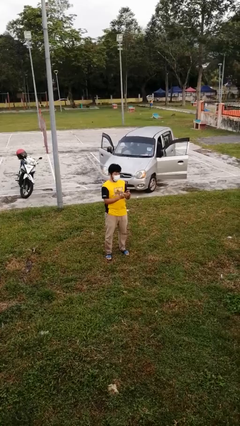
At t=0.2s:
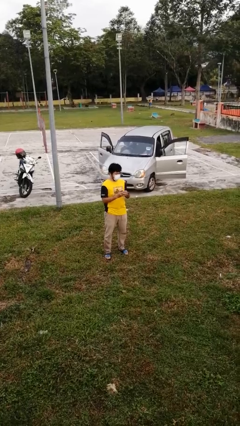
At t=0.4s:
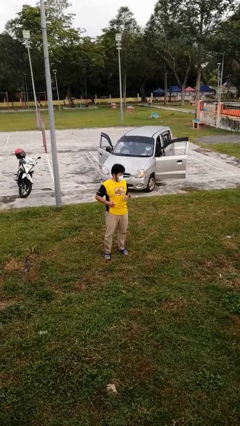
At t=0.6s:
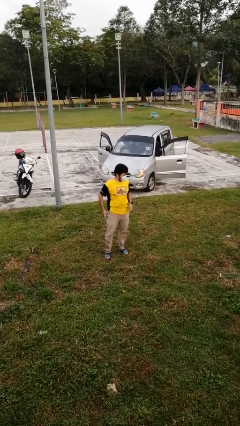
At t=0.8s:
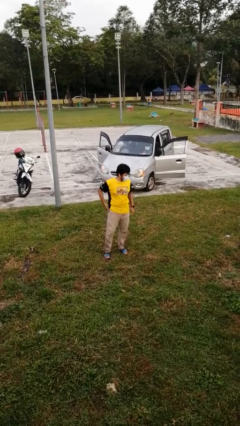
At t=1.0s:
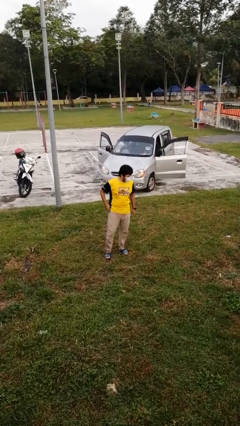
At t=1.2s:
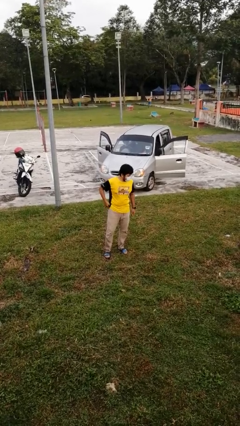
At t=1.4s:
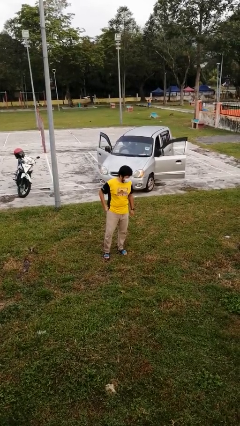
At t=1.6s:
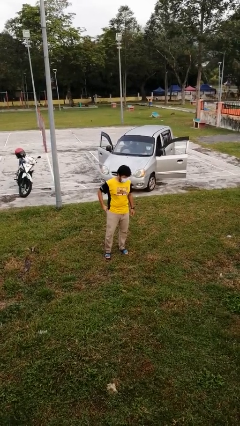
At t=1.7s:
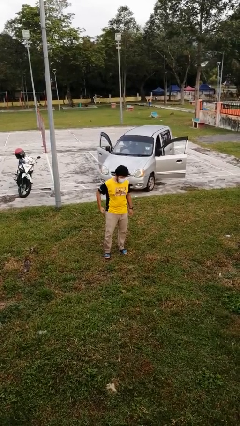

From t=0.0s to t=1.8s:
person puts phone into pocket

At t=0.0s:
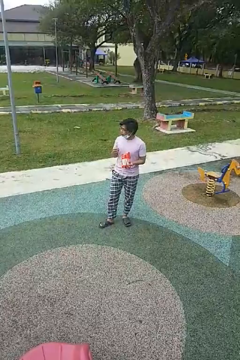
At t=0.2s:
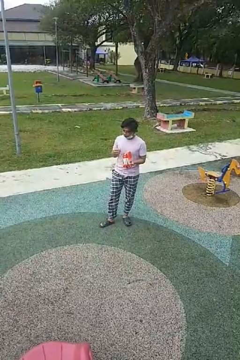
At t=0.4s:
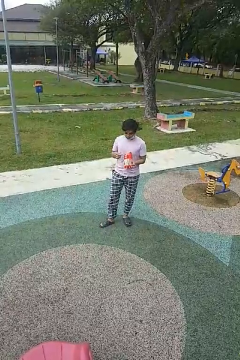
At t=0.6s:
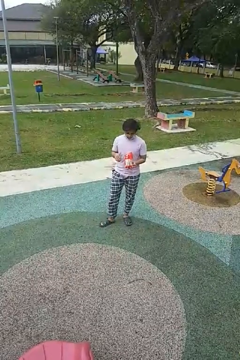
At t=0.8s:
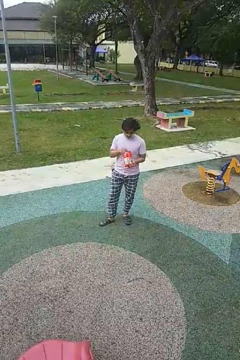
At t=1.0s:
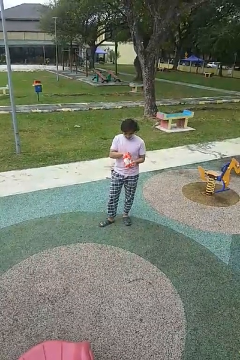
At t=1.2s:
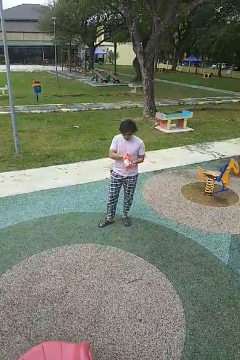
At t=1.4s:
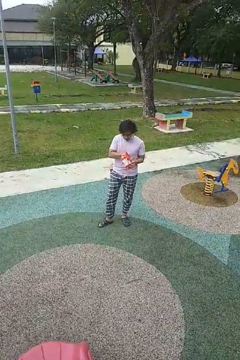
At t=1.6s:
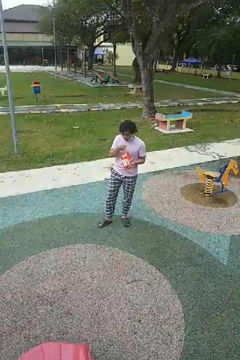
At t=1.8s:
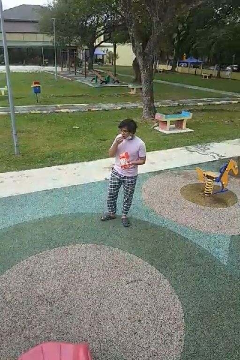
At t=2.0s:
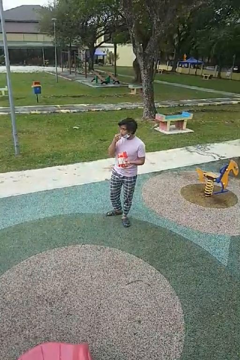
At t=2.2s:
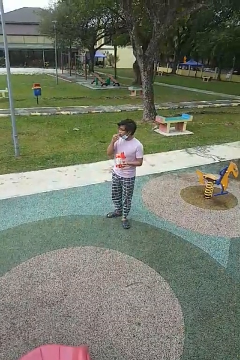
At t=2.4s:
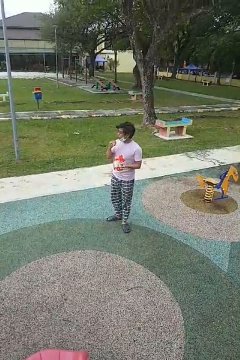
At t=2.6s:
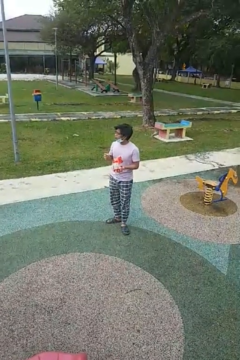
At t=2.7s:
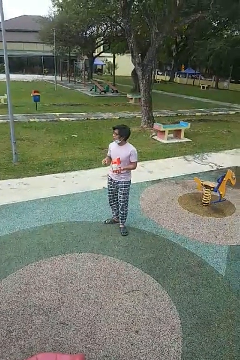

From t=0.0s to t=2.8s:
person eats snack from bag

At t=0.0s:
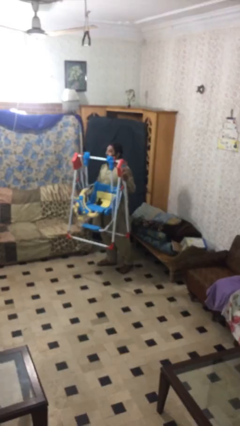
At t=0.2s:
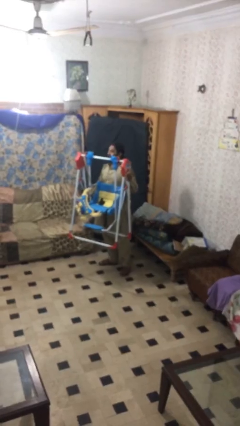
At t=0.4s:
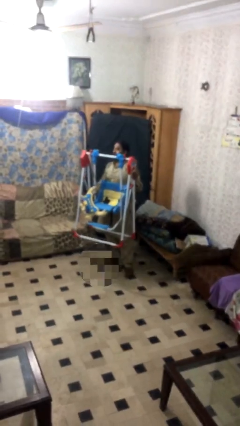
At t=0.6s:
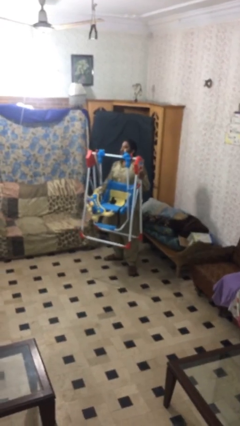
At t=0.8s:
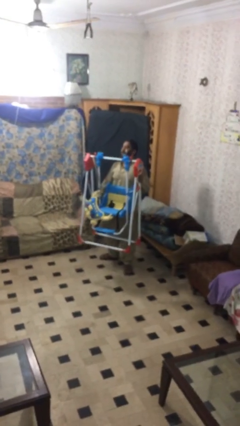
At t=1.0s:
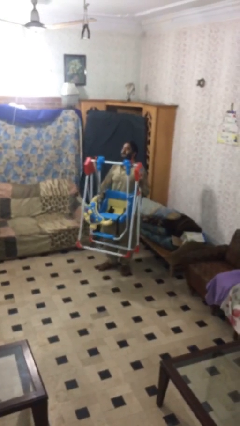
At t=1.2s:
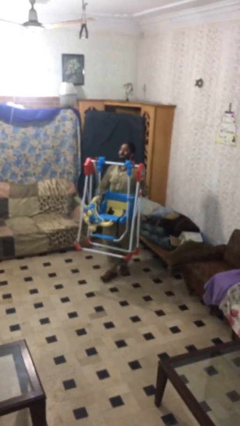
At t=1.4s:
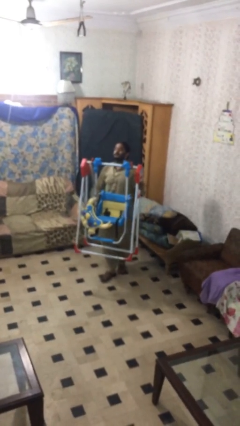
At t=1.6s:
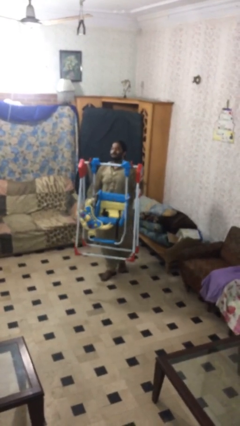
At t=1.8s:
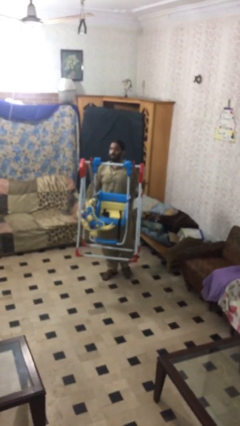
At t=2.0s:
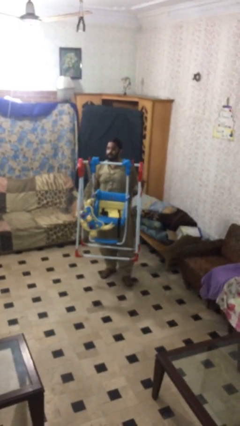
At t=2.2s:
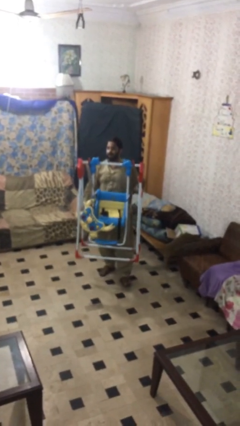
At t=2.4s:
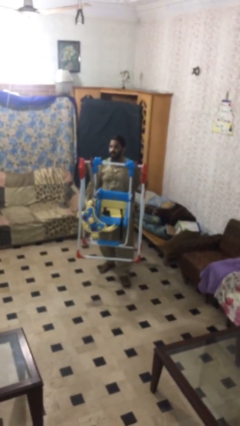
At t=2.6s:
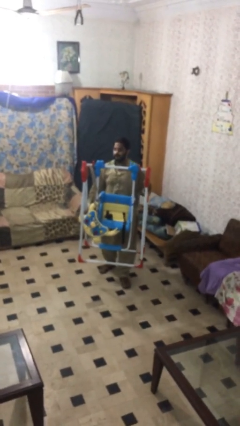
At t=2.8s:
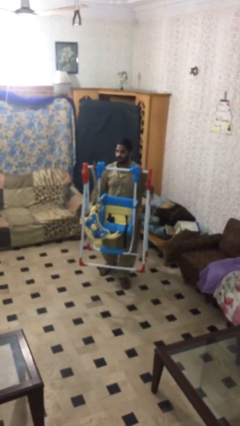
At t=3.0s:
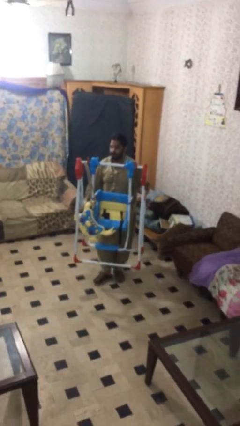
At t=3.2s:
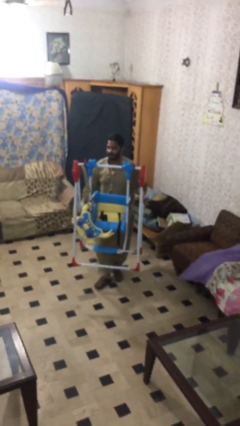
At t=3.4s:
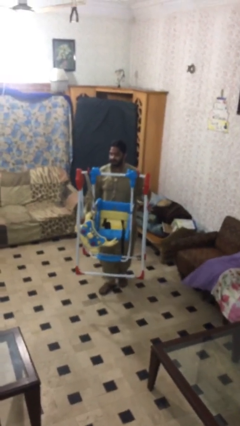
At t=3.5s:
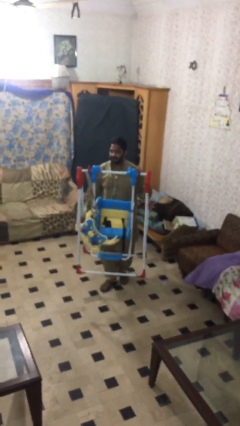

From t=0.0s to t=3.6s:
person carries heavy object

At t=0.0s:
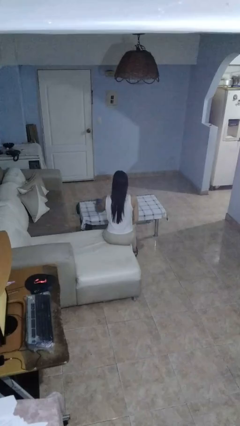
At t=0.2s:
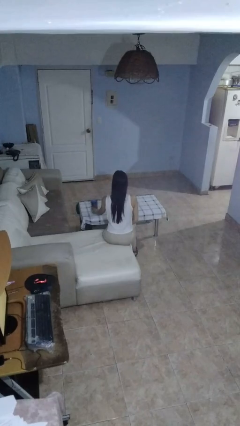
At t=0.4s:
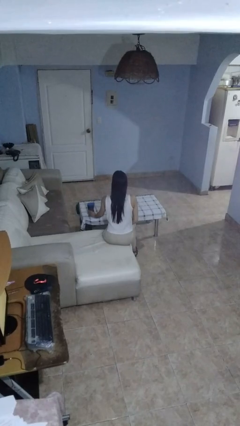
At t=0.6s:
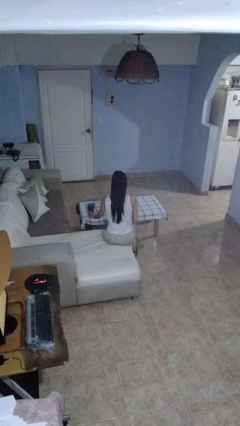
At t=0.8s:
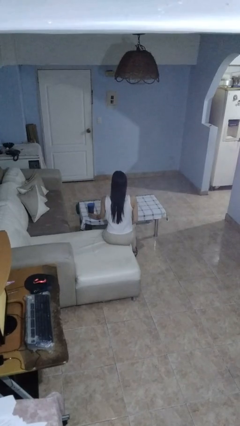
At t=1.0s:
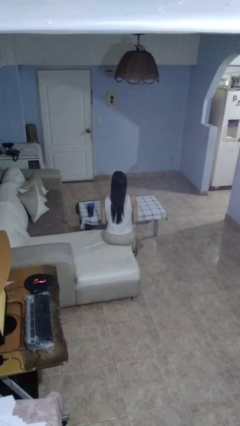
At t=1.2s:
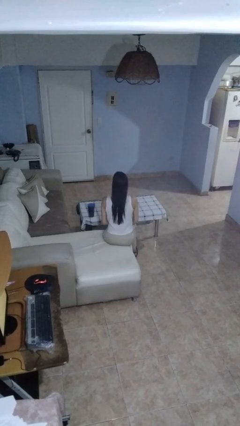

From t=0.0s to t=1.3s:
person sets upright glass

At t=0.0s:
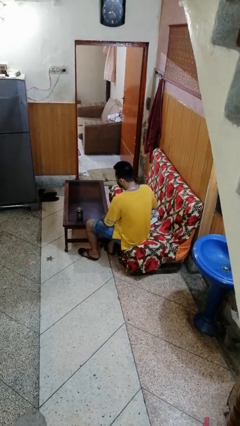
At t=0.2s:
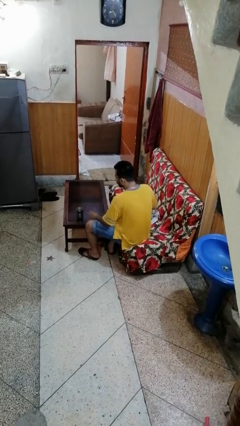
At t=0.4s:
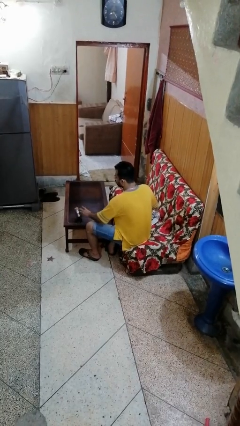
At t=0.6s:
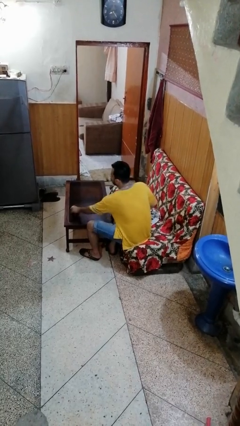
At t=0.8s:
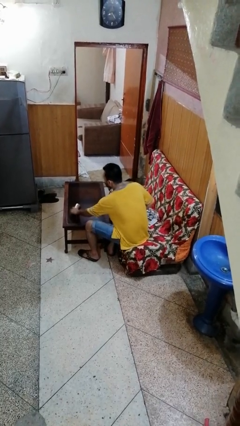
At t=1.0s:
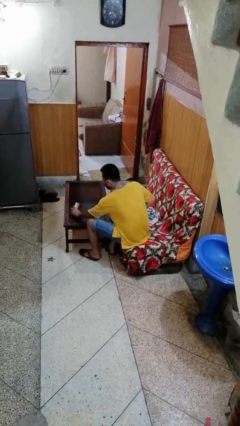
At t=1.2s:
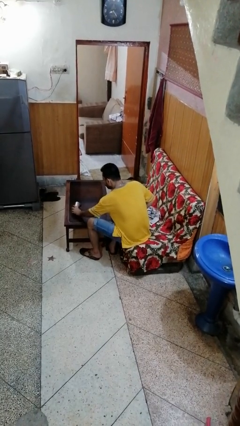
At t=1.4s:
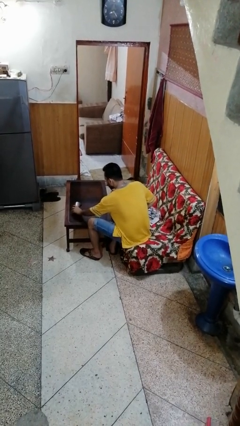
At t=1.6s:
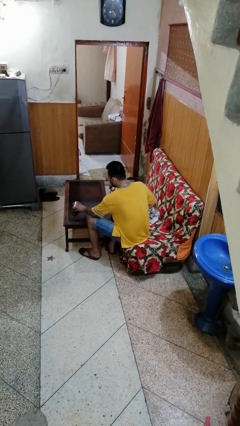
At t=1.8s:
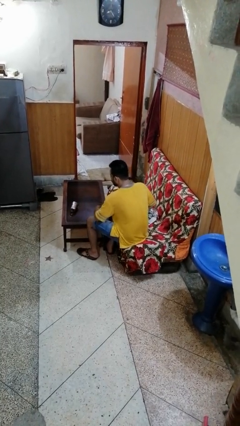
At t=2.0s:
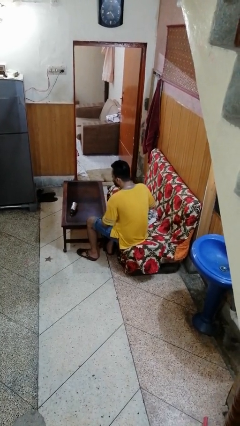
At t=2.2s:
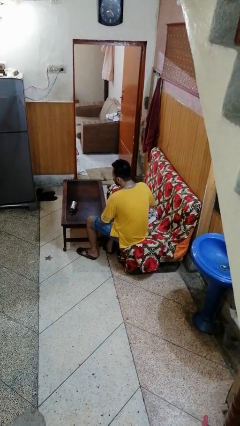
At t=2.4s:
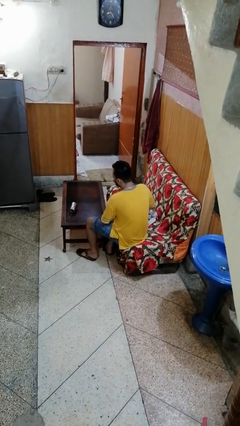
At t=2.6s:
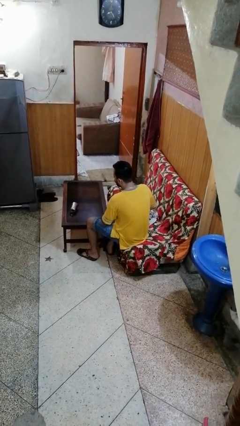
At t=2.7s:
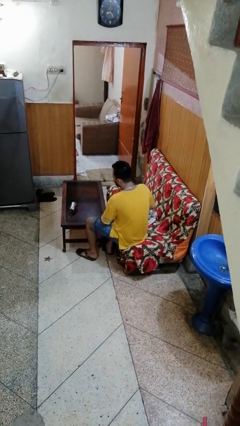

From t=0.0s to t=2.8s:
person knocks over glass

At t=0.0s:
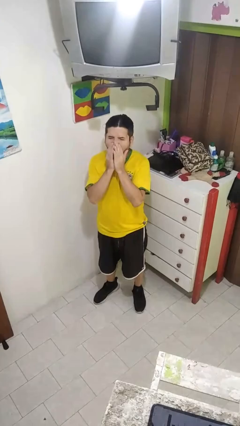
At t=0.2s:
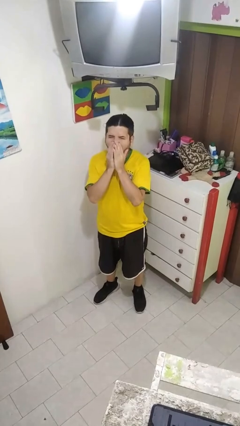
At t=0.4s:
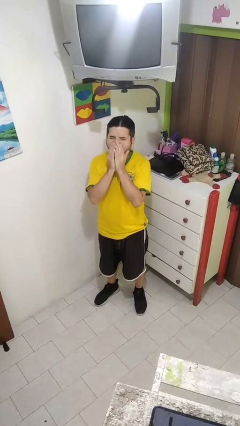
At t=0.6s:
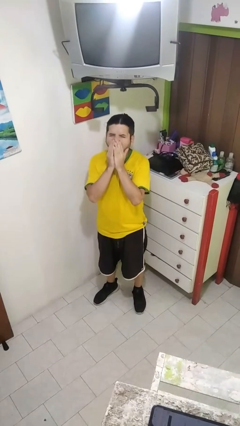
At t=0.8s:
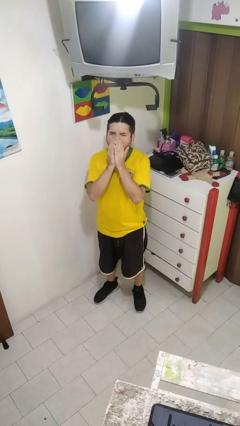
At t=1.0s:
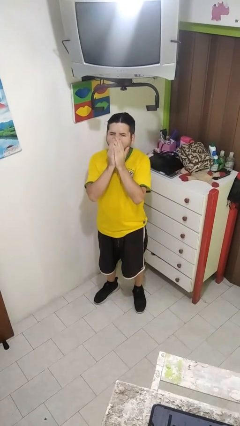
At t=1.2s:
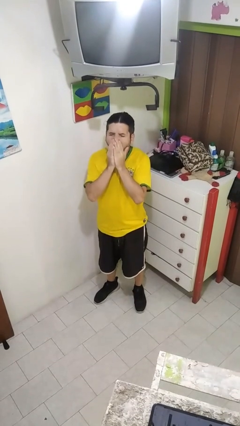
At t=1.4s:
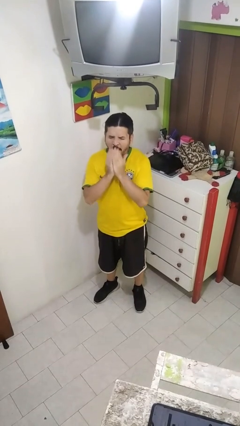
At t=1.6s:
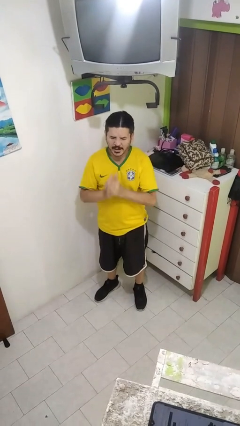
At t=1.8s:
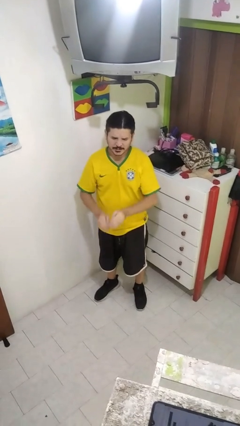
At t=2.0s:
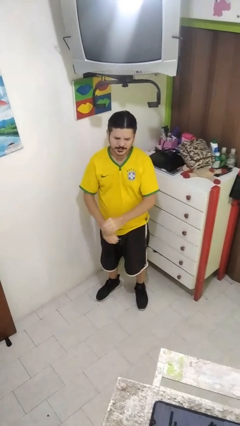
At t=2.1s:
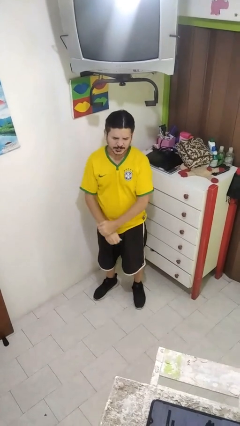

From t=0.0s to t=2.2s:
person yawns

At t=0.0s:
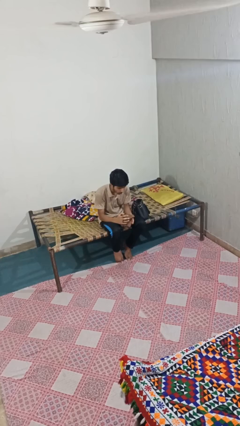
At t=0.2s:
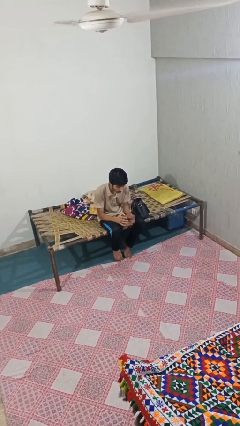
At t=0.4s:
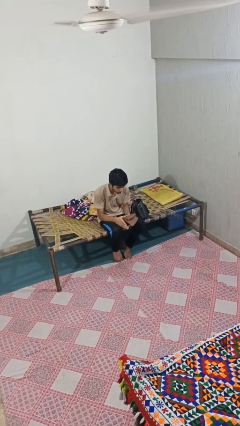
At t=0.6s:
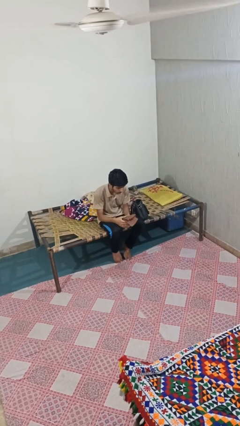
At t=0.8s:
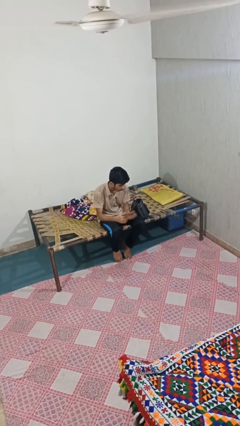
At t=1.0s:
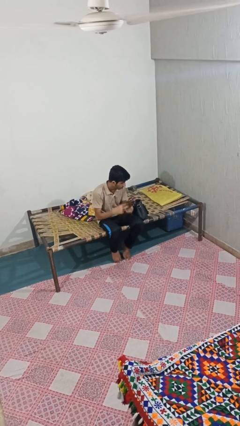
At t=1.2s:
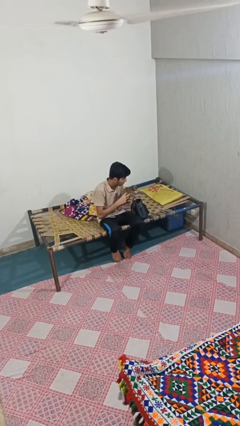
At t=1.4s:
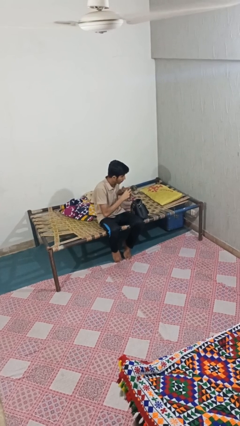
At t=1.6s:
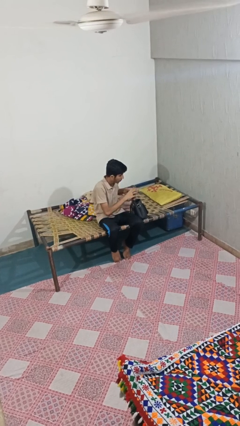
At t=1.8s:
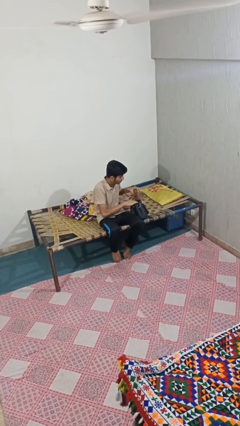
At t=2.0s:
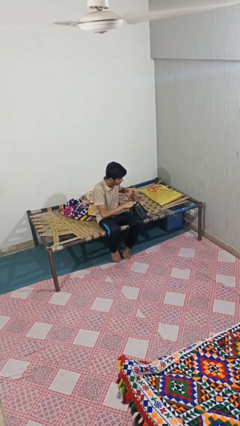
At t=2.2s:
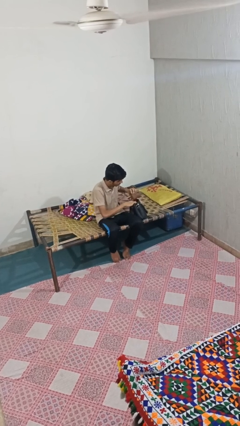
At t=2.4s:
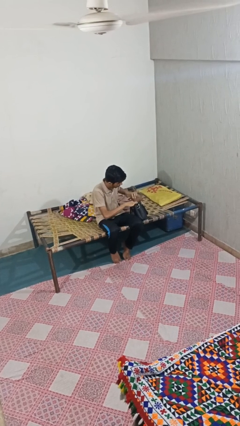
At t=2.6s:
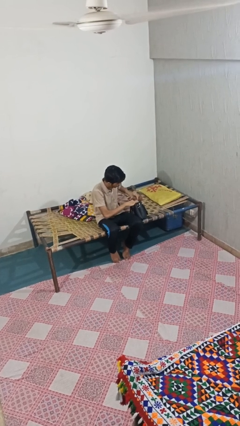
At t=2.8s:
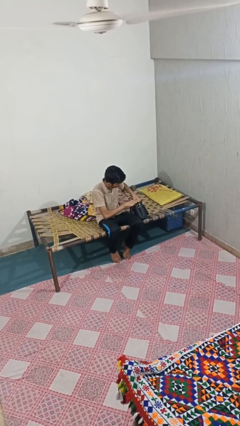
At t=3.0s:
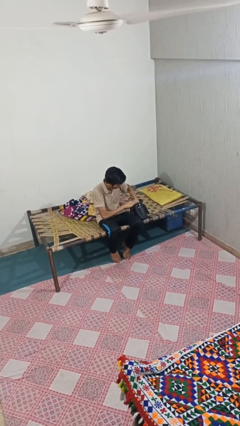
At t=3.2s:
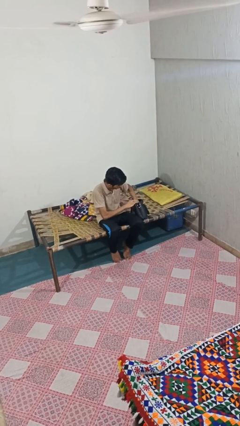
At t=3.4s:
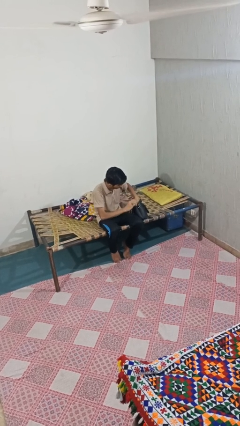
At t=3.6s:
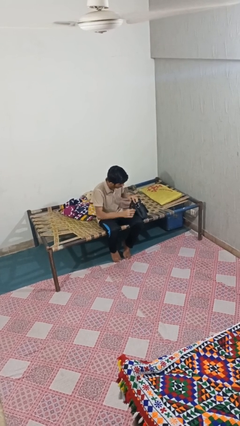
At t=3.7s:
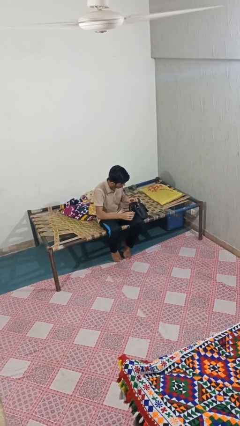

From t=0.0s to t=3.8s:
person puts object into purse
